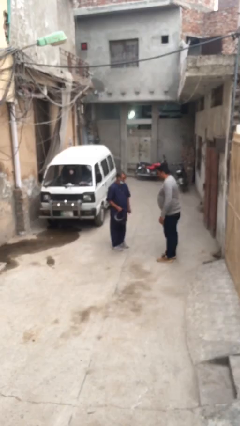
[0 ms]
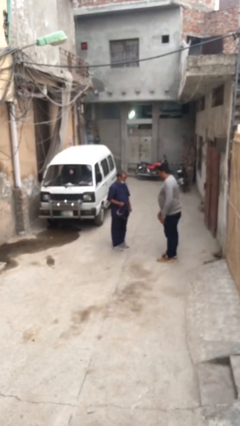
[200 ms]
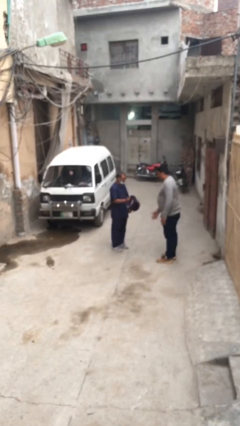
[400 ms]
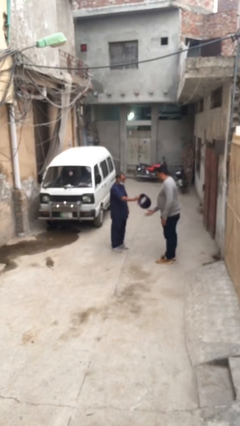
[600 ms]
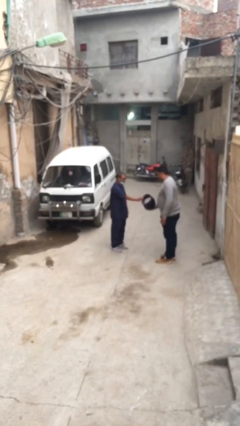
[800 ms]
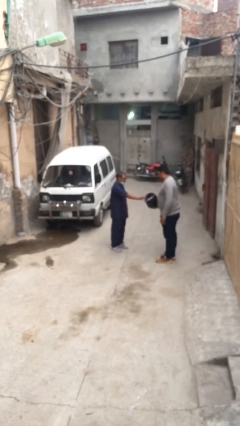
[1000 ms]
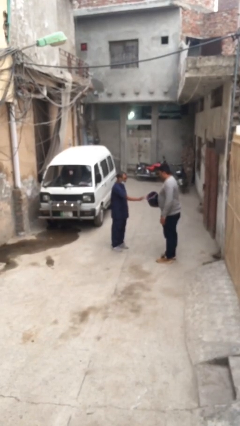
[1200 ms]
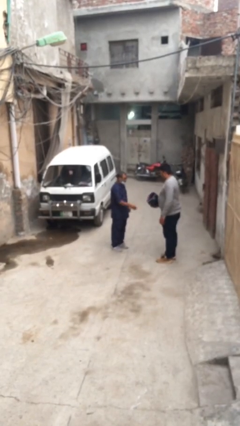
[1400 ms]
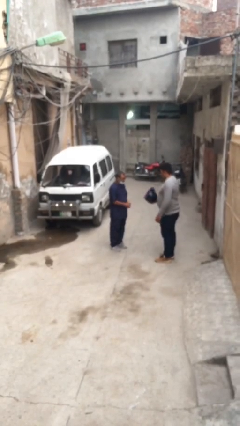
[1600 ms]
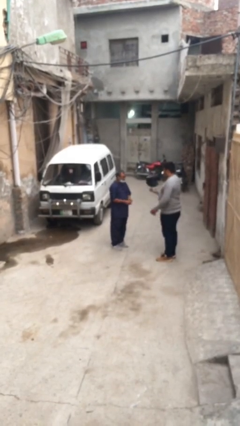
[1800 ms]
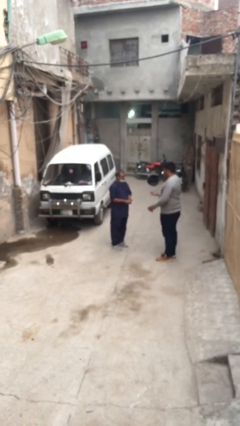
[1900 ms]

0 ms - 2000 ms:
person transfers object to person

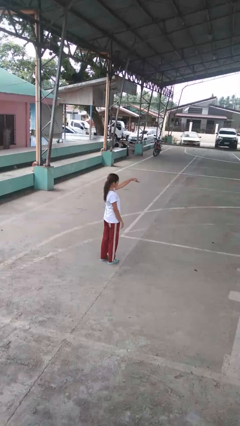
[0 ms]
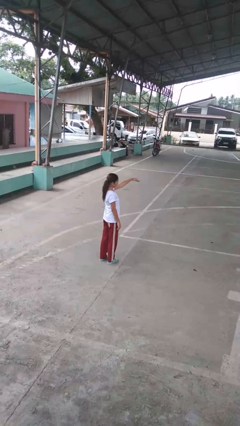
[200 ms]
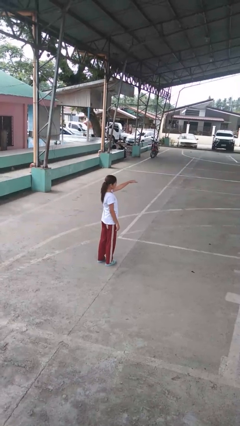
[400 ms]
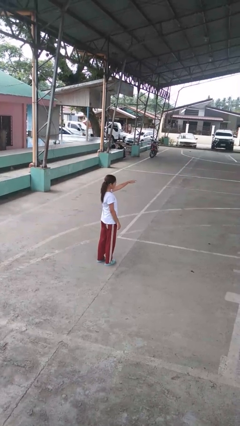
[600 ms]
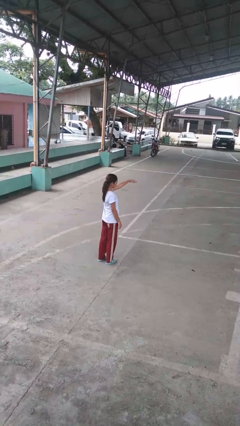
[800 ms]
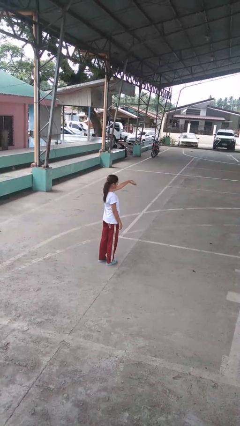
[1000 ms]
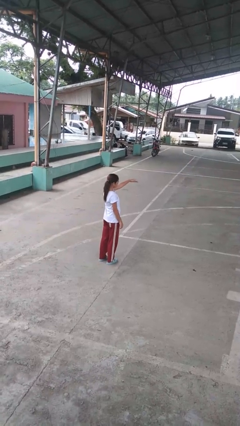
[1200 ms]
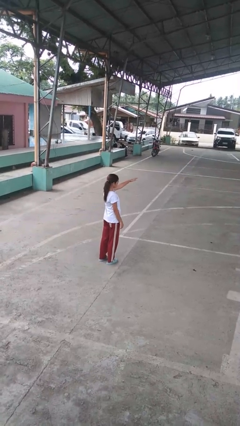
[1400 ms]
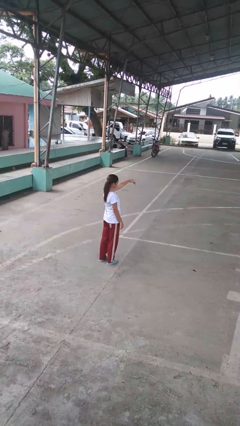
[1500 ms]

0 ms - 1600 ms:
person gestures come here

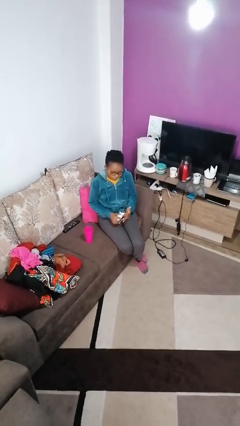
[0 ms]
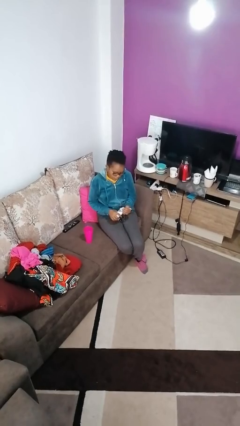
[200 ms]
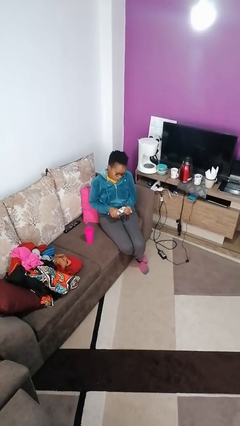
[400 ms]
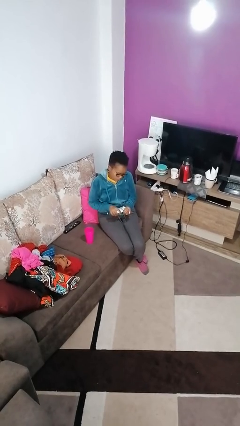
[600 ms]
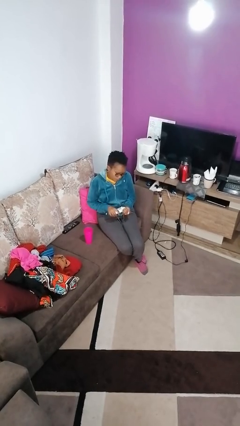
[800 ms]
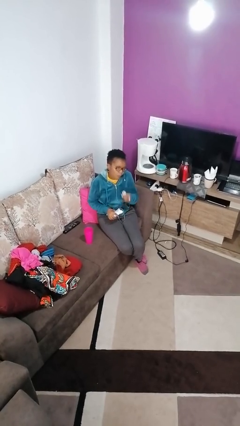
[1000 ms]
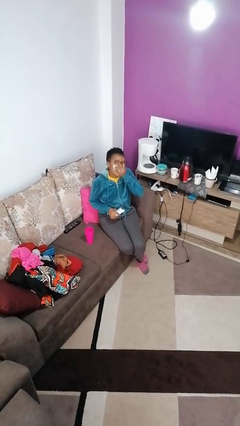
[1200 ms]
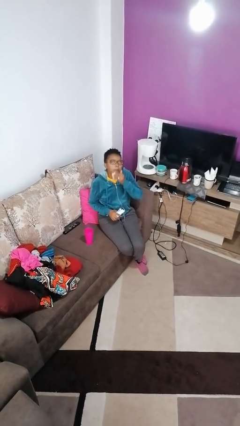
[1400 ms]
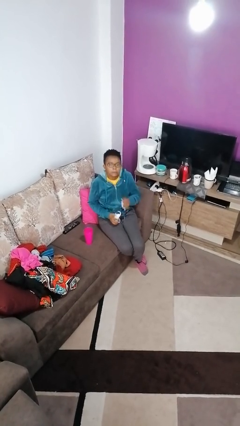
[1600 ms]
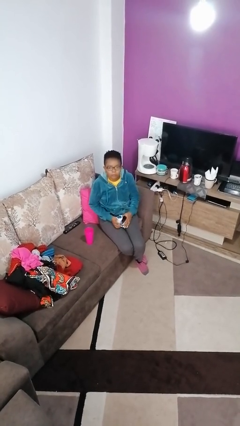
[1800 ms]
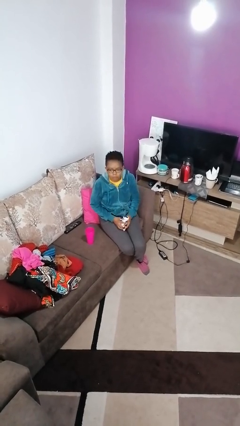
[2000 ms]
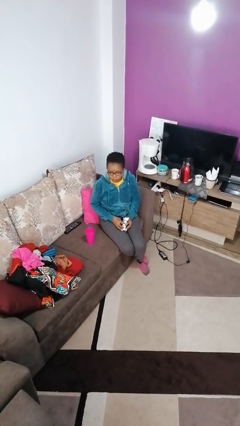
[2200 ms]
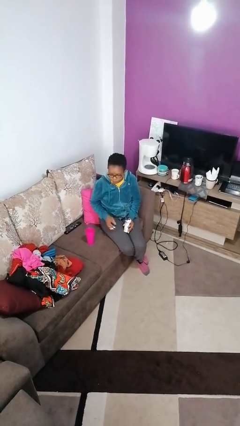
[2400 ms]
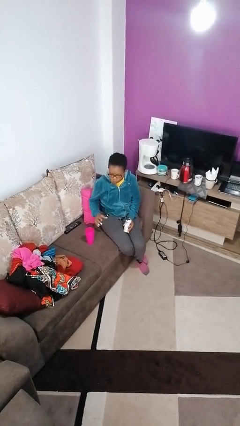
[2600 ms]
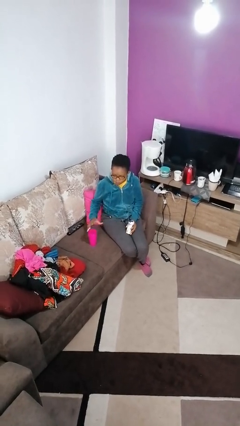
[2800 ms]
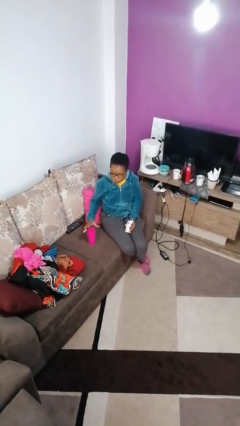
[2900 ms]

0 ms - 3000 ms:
person takes medicine pills

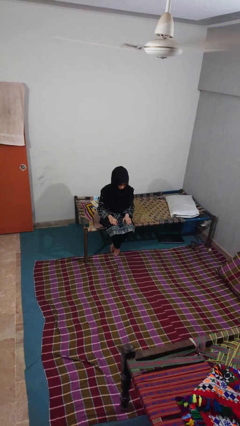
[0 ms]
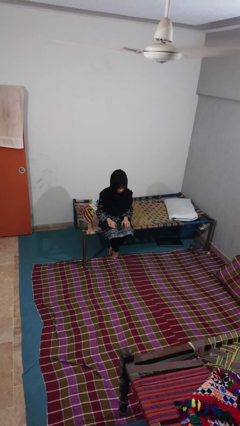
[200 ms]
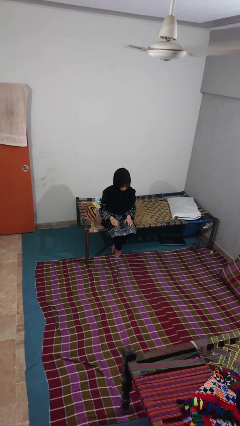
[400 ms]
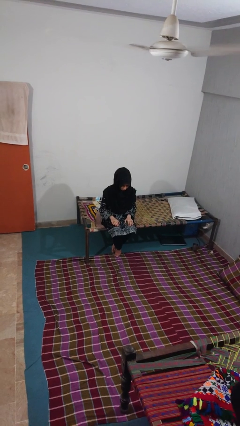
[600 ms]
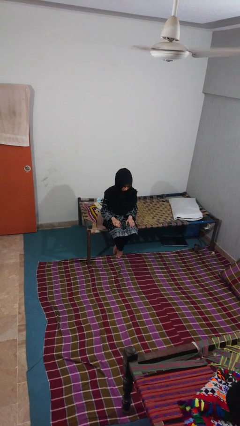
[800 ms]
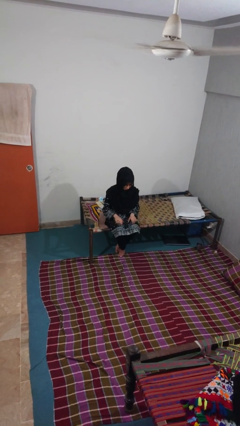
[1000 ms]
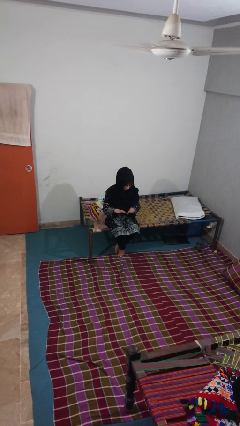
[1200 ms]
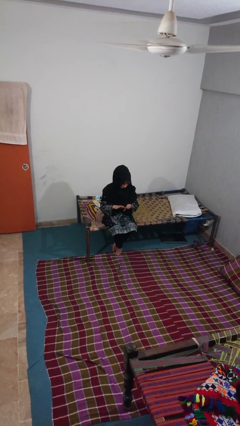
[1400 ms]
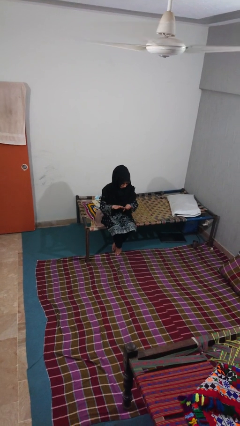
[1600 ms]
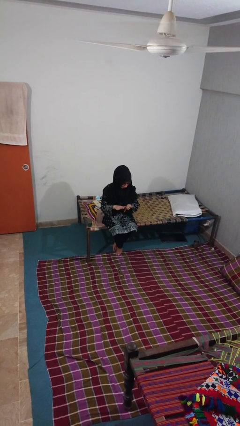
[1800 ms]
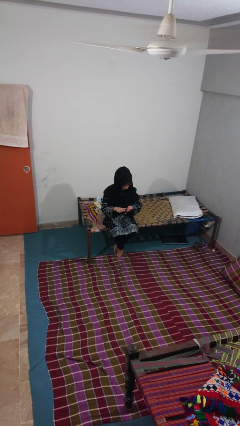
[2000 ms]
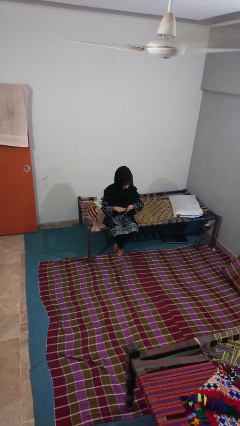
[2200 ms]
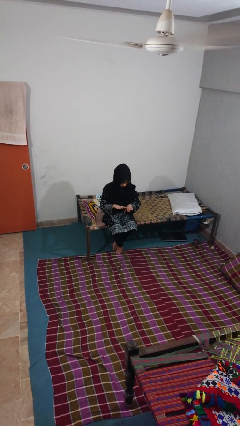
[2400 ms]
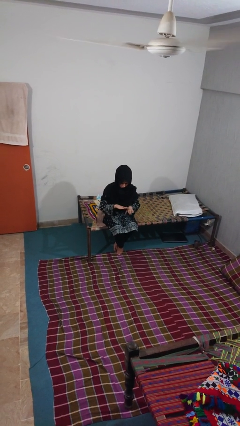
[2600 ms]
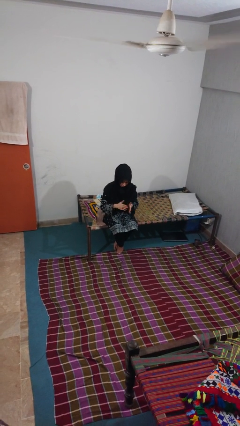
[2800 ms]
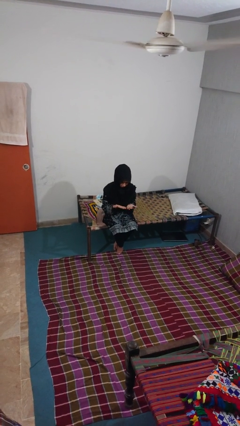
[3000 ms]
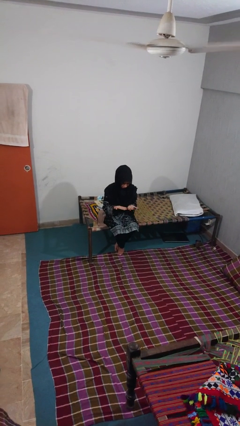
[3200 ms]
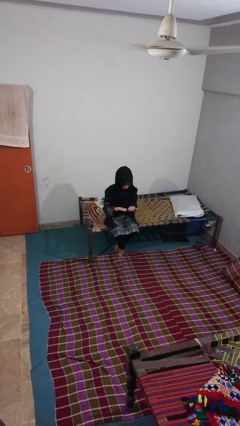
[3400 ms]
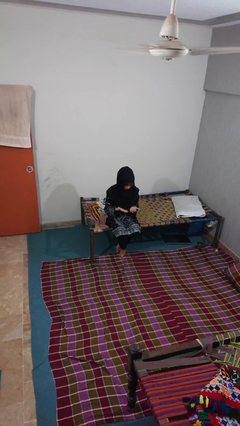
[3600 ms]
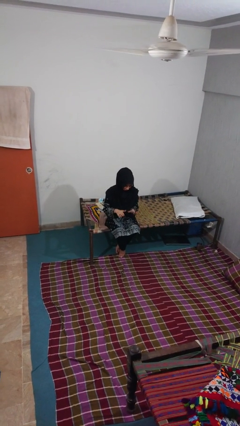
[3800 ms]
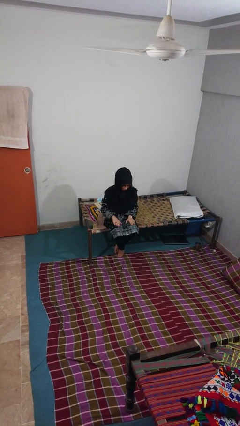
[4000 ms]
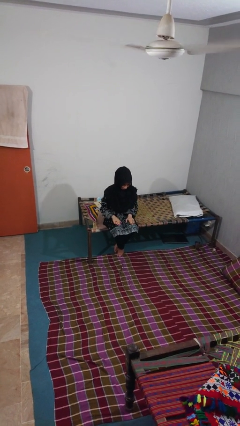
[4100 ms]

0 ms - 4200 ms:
person looks at hands in lap

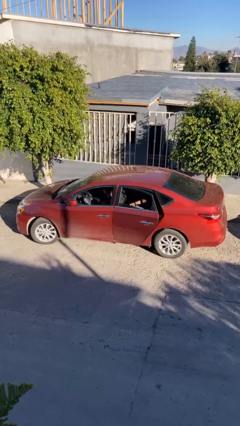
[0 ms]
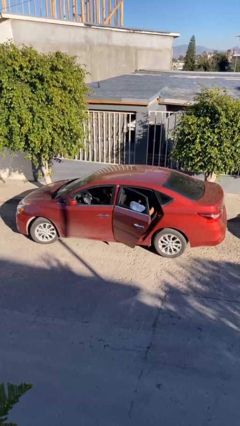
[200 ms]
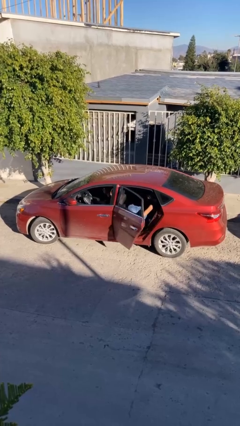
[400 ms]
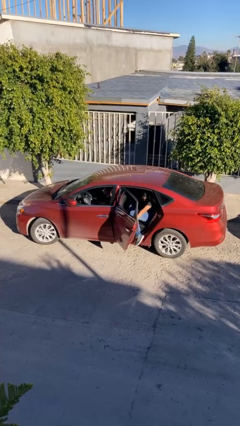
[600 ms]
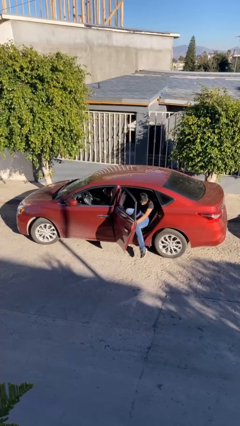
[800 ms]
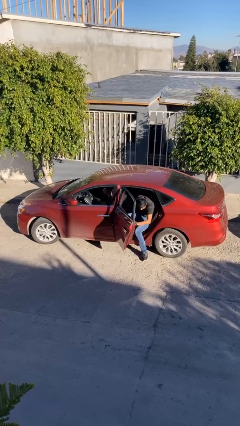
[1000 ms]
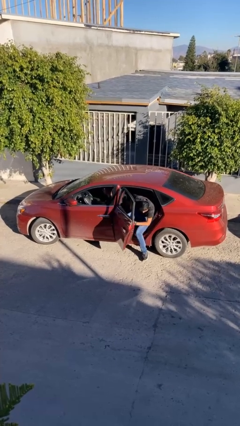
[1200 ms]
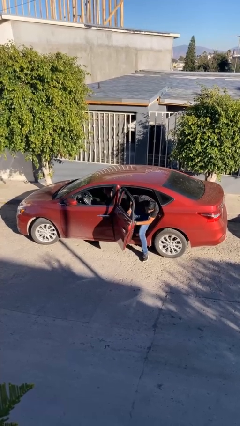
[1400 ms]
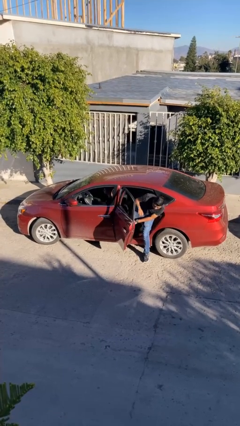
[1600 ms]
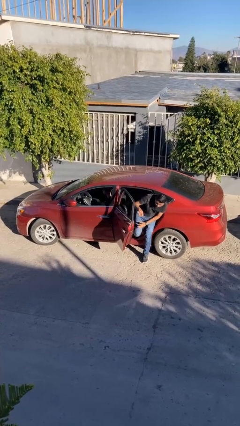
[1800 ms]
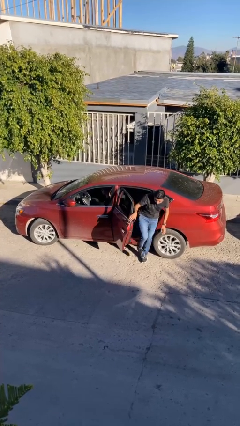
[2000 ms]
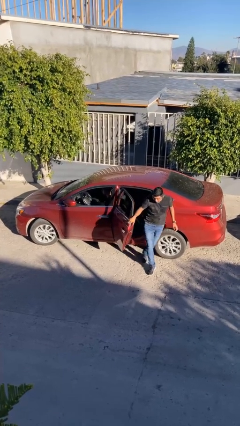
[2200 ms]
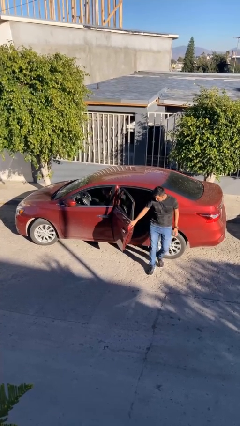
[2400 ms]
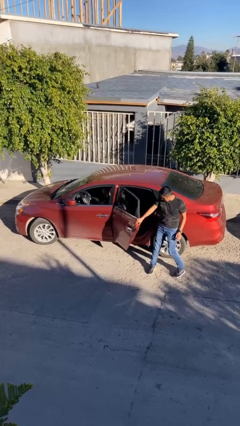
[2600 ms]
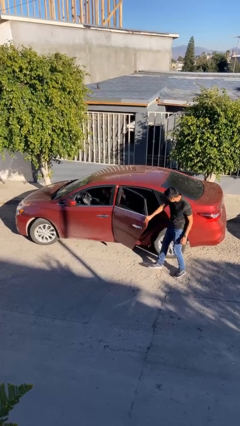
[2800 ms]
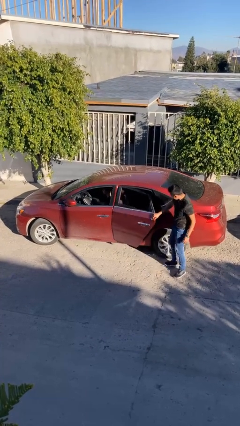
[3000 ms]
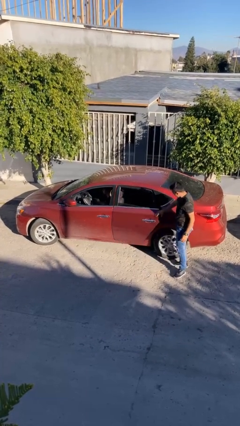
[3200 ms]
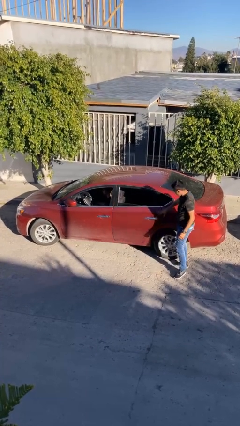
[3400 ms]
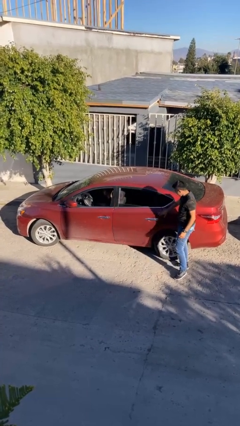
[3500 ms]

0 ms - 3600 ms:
car drops off person

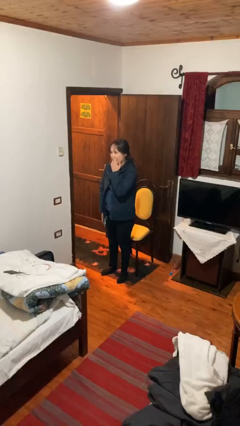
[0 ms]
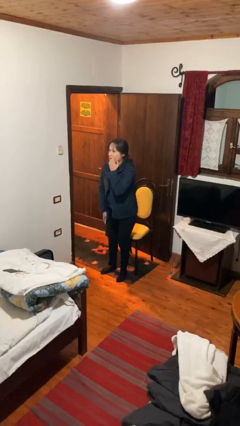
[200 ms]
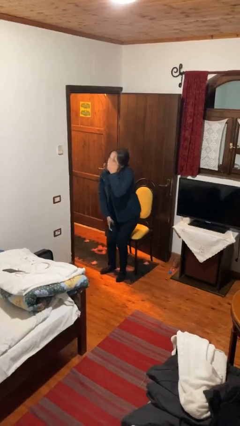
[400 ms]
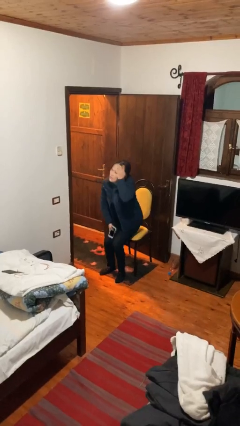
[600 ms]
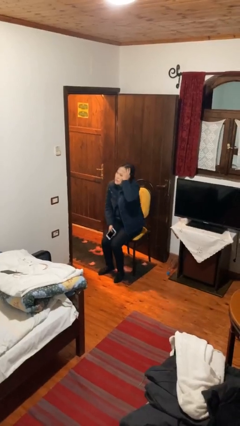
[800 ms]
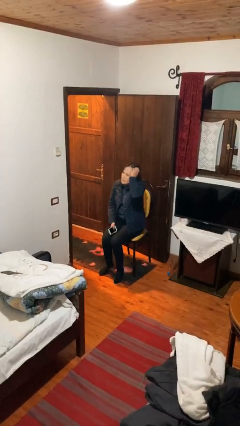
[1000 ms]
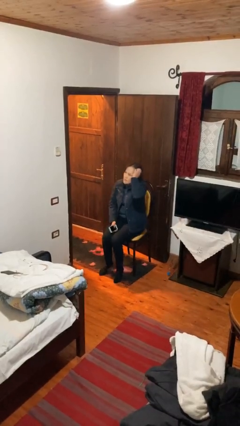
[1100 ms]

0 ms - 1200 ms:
person sits down

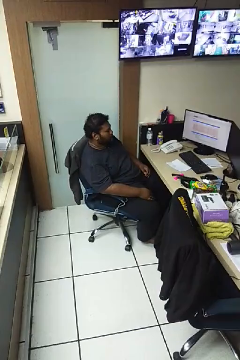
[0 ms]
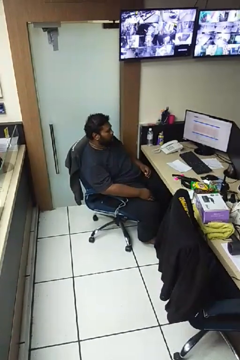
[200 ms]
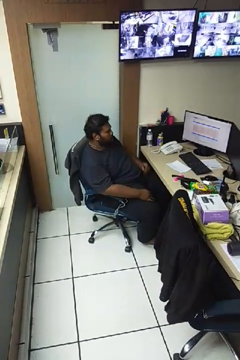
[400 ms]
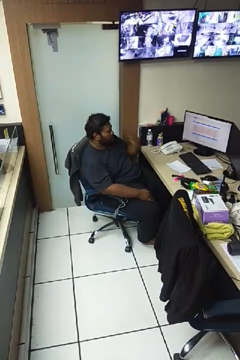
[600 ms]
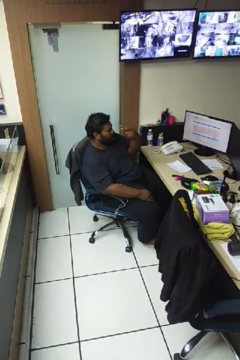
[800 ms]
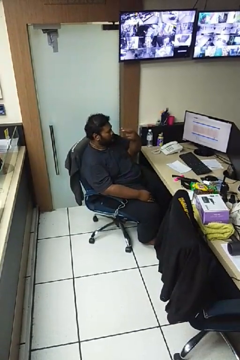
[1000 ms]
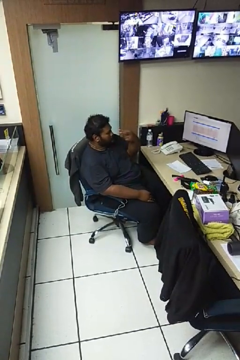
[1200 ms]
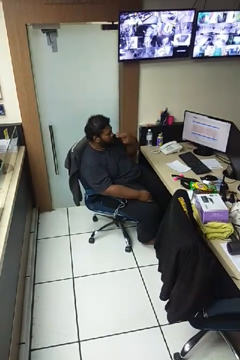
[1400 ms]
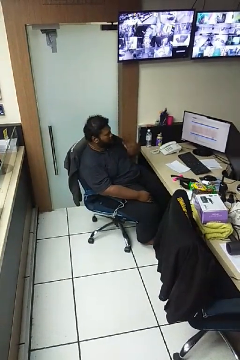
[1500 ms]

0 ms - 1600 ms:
person gestures watch closely

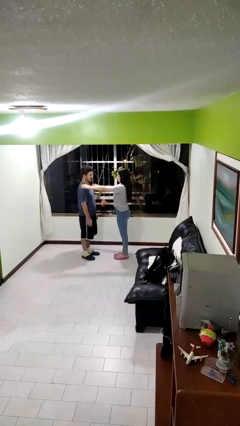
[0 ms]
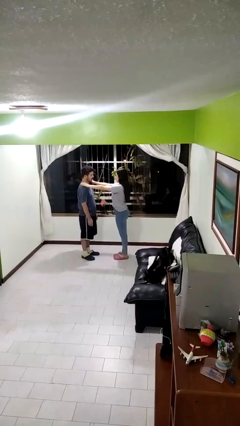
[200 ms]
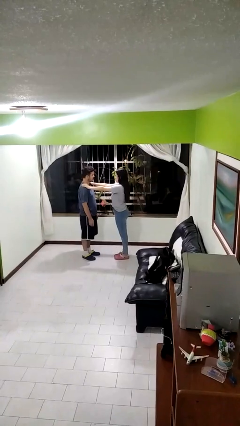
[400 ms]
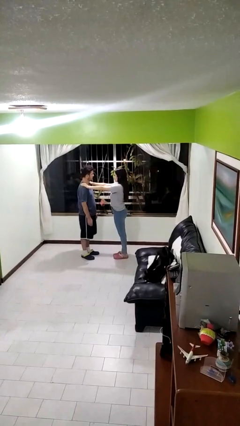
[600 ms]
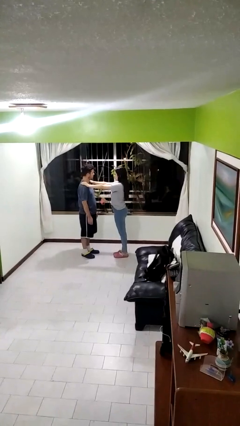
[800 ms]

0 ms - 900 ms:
person grabs person by shoulder
